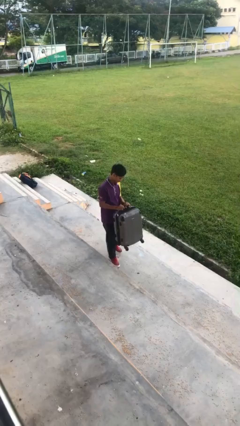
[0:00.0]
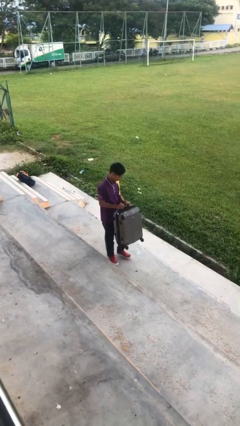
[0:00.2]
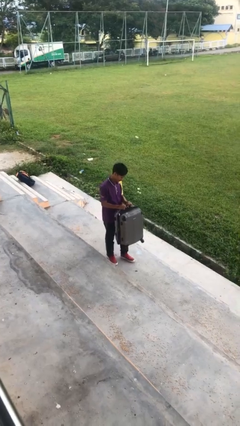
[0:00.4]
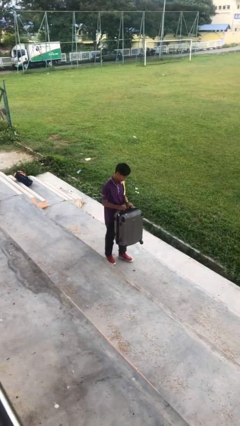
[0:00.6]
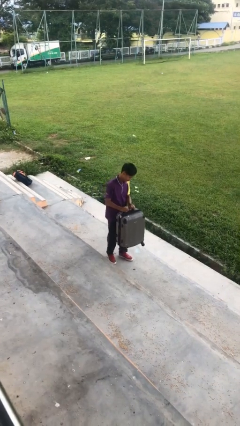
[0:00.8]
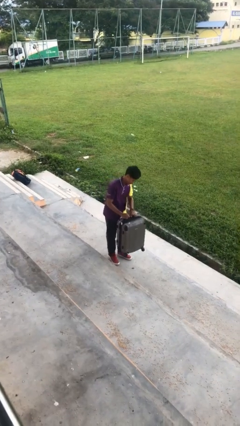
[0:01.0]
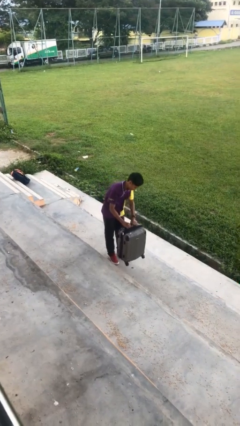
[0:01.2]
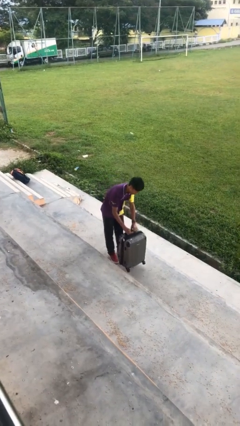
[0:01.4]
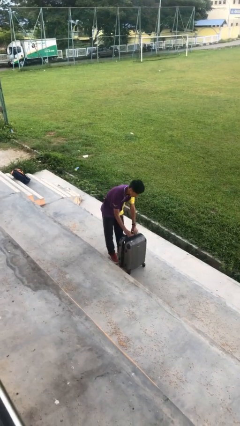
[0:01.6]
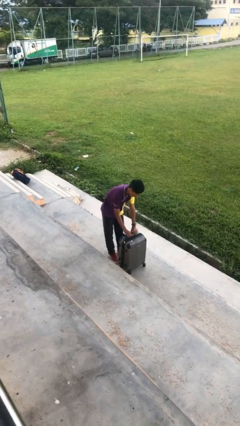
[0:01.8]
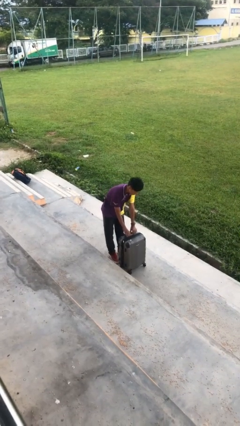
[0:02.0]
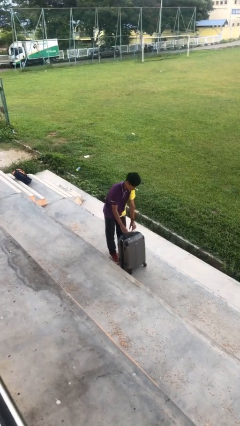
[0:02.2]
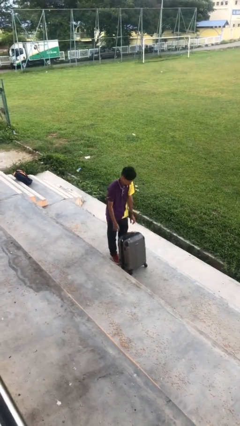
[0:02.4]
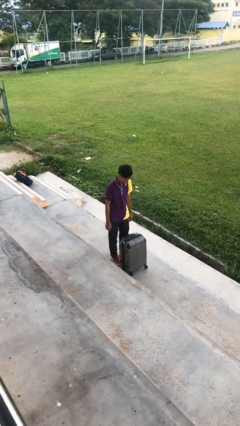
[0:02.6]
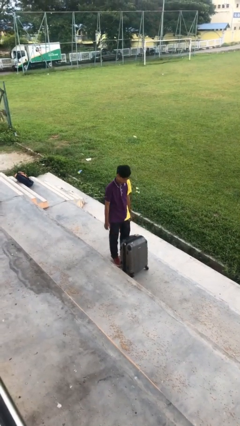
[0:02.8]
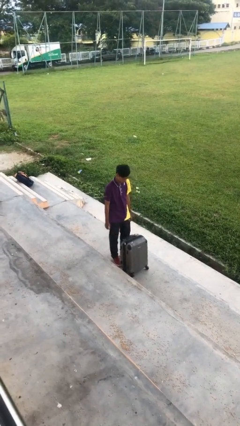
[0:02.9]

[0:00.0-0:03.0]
person puts down object on floor

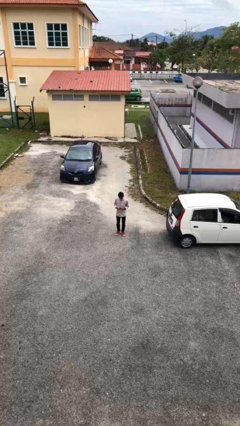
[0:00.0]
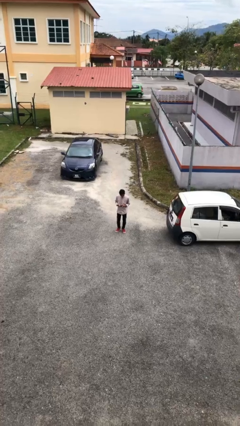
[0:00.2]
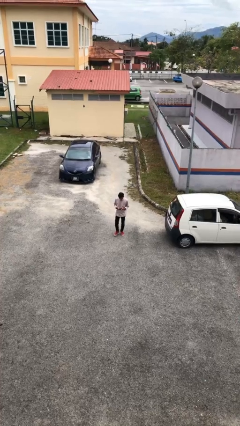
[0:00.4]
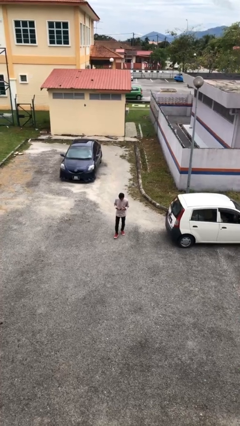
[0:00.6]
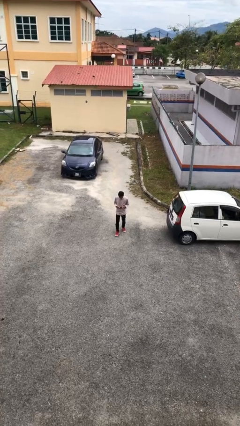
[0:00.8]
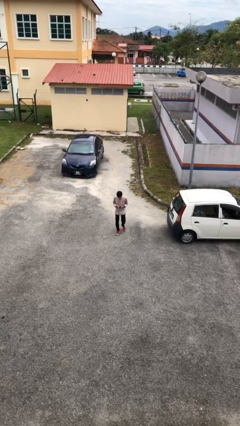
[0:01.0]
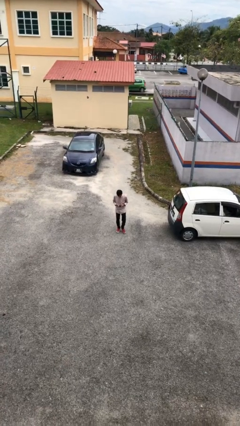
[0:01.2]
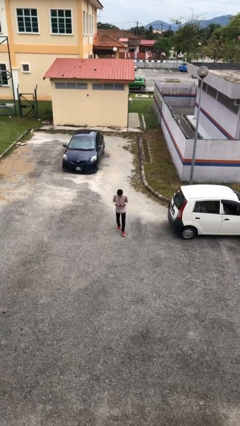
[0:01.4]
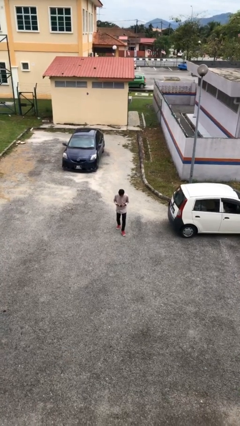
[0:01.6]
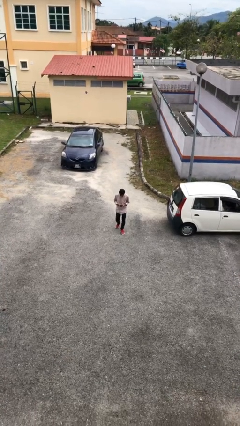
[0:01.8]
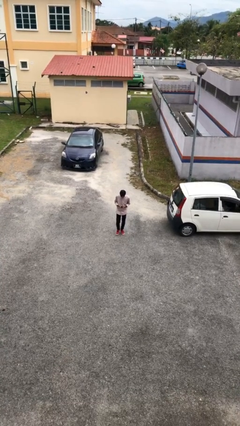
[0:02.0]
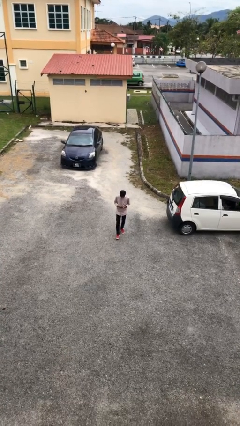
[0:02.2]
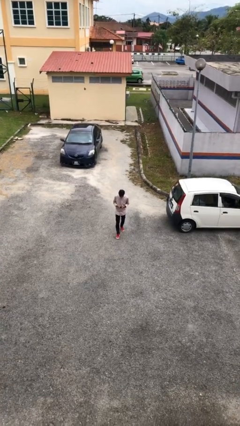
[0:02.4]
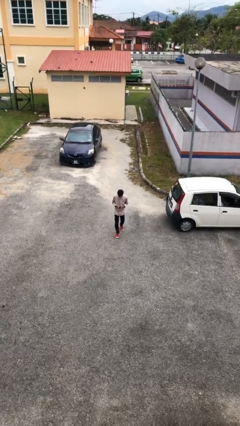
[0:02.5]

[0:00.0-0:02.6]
person texts on phone

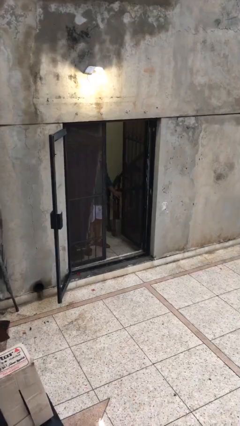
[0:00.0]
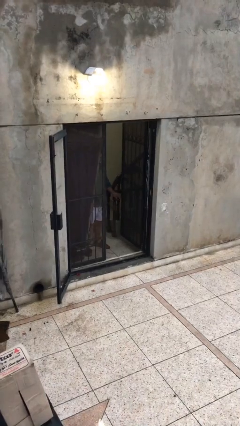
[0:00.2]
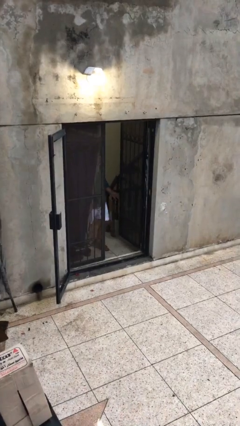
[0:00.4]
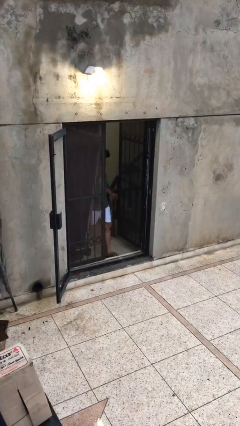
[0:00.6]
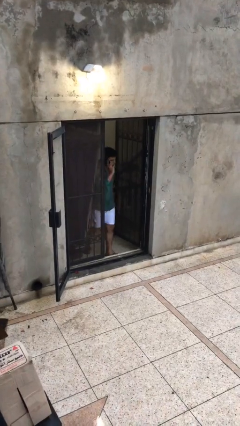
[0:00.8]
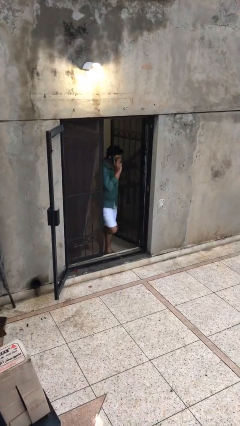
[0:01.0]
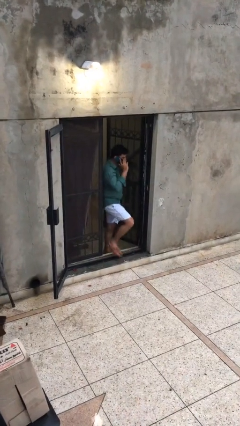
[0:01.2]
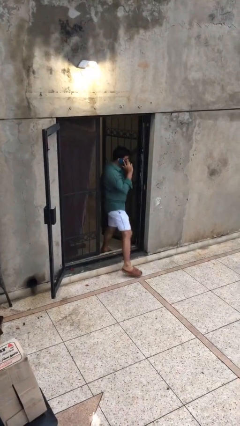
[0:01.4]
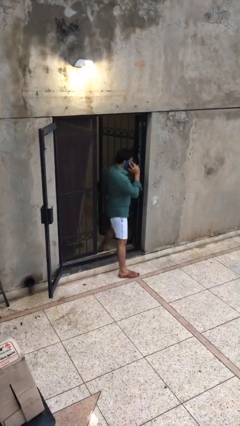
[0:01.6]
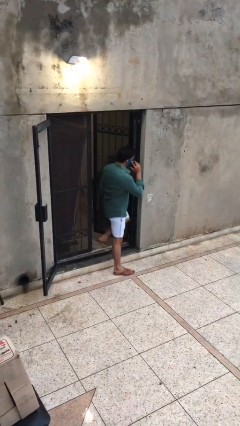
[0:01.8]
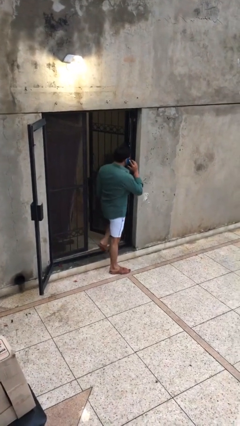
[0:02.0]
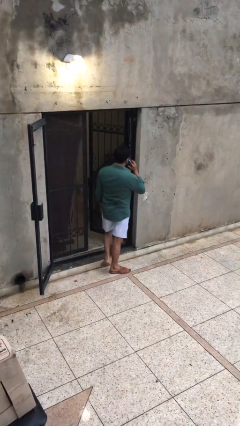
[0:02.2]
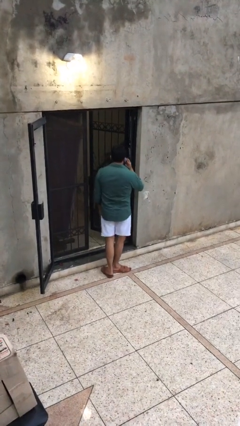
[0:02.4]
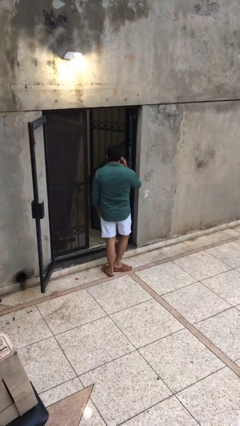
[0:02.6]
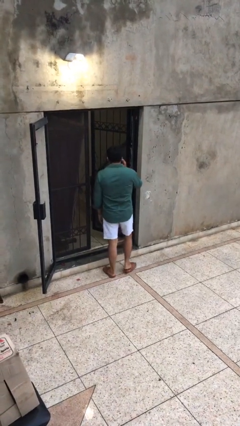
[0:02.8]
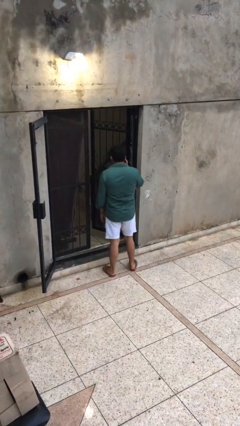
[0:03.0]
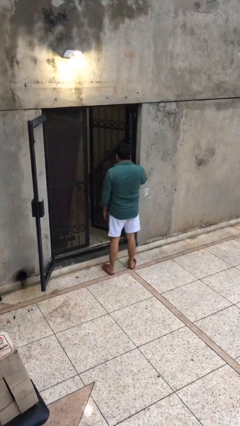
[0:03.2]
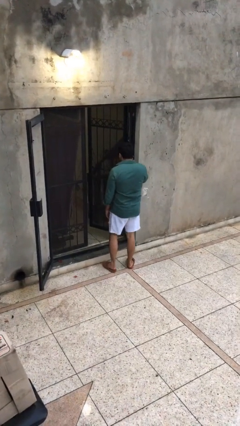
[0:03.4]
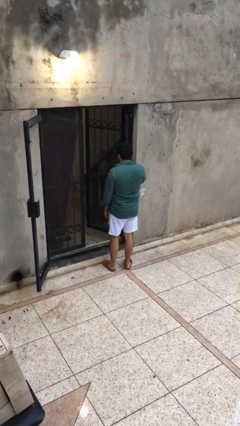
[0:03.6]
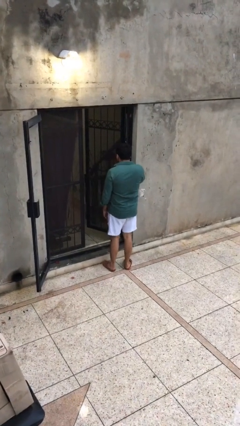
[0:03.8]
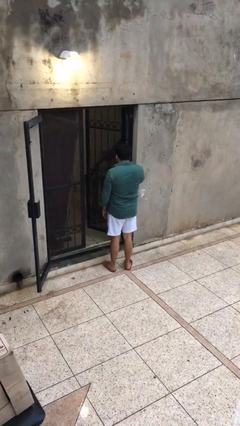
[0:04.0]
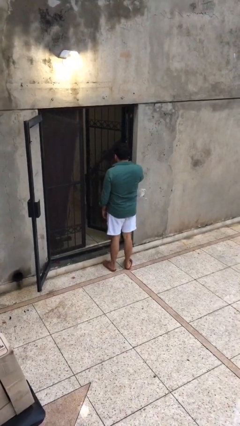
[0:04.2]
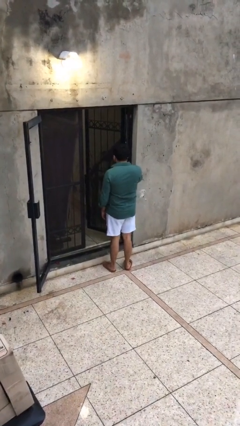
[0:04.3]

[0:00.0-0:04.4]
person enters scene through structure

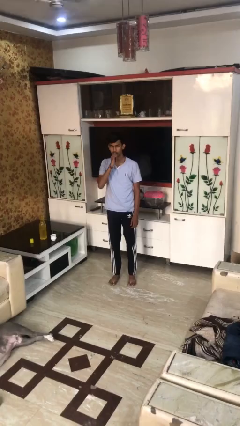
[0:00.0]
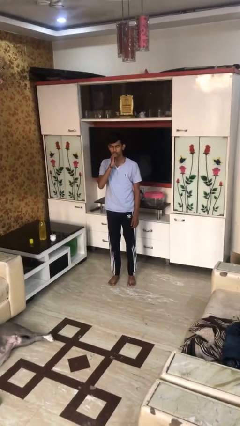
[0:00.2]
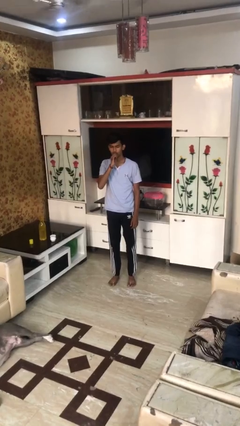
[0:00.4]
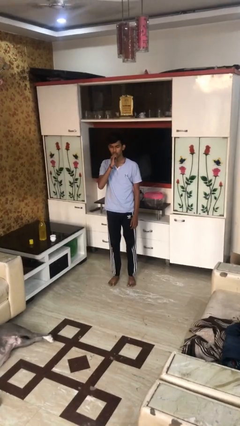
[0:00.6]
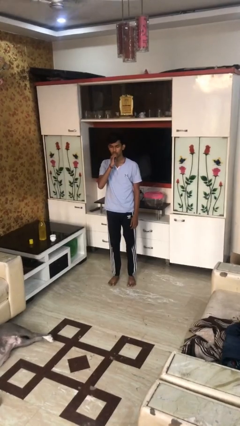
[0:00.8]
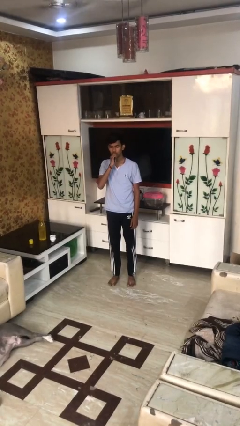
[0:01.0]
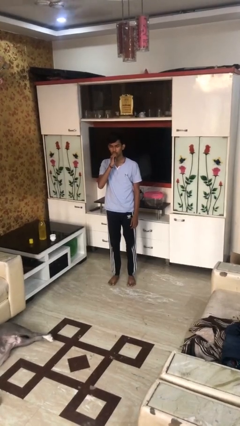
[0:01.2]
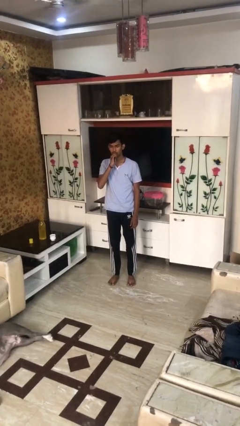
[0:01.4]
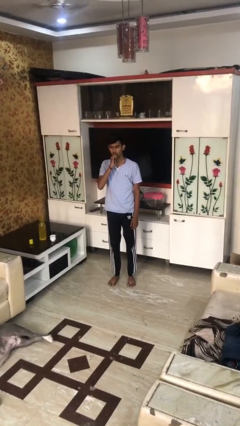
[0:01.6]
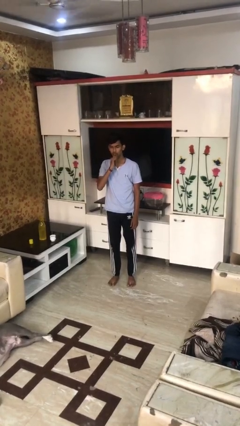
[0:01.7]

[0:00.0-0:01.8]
person vapes

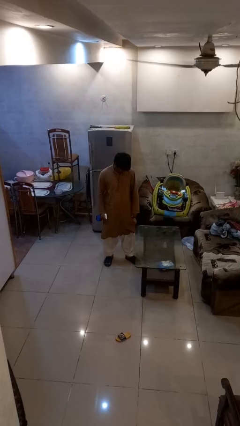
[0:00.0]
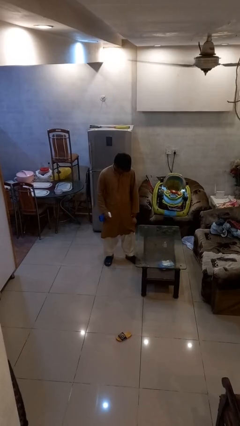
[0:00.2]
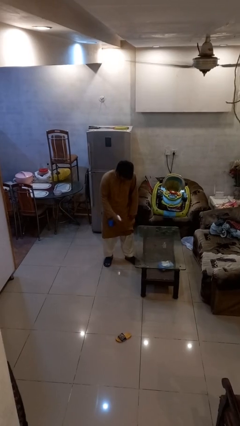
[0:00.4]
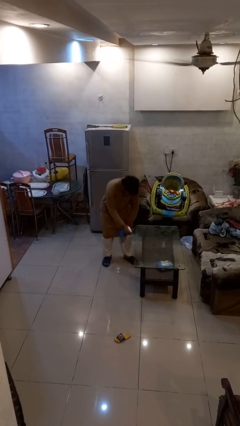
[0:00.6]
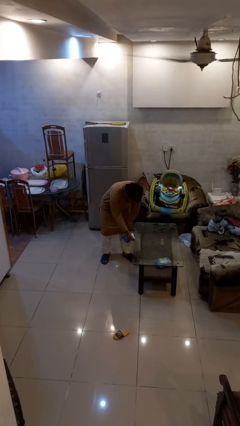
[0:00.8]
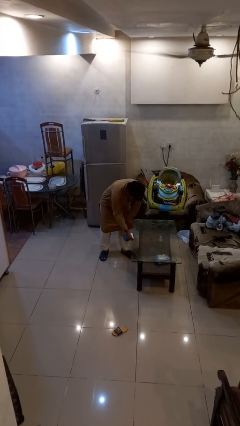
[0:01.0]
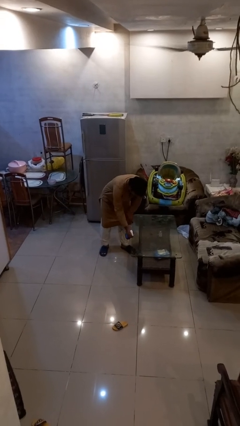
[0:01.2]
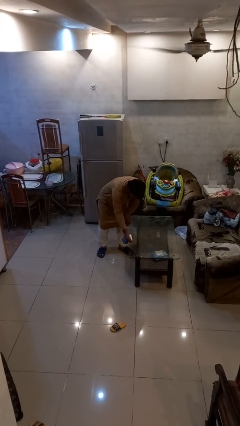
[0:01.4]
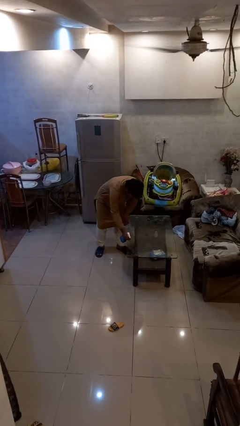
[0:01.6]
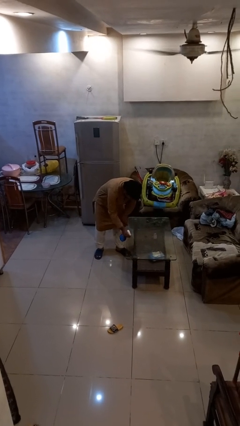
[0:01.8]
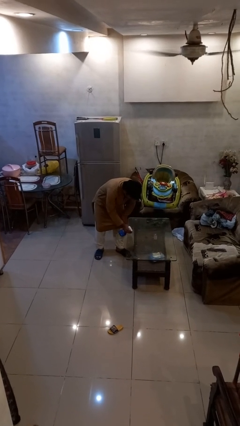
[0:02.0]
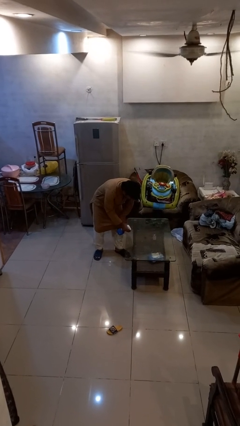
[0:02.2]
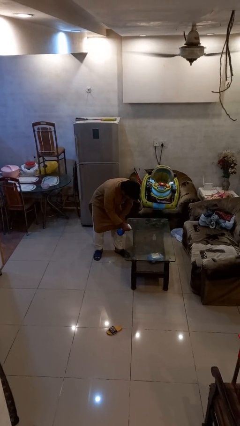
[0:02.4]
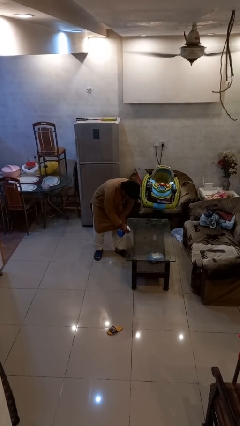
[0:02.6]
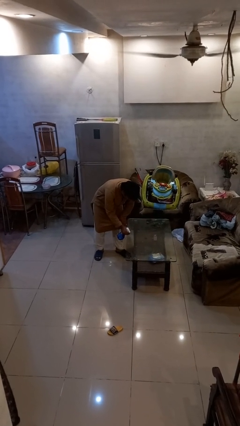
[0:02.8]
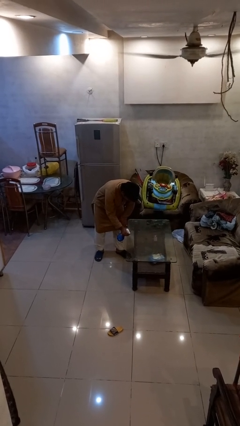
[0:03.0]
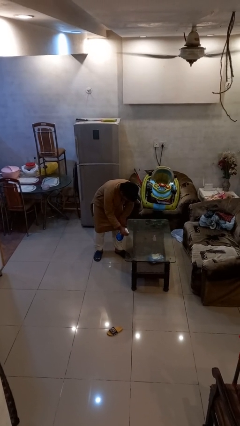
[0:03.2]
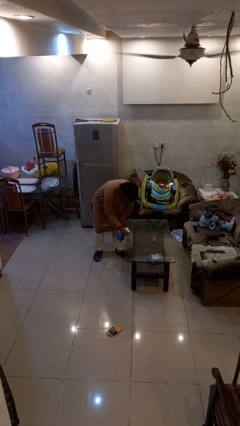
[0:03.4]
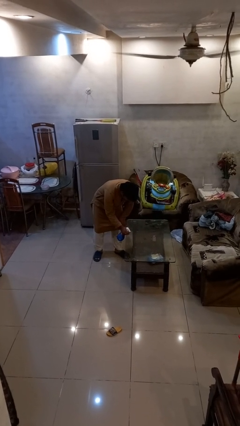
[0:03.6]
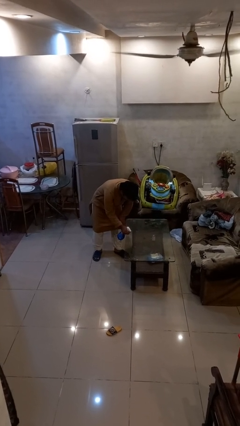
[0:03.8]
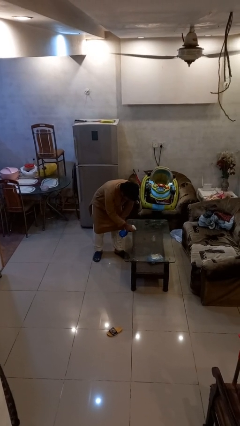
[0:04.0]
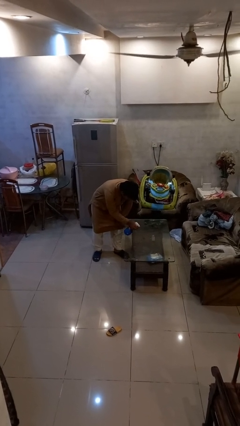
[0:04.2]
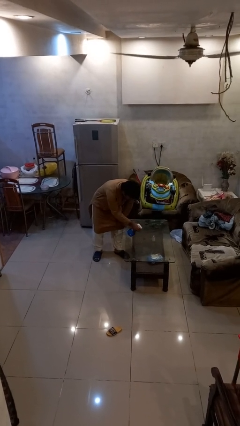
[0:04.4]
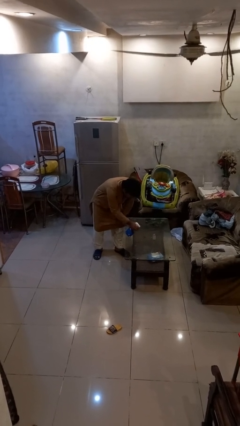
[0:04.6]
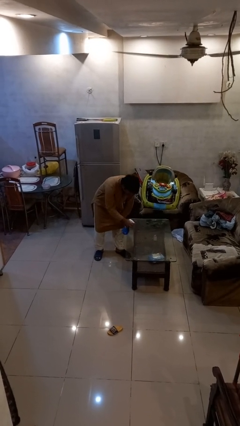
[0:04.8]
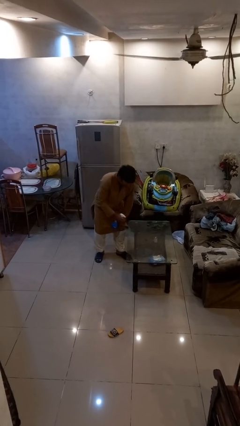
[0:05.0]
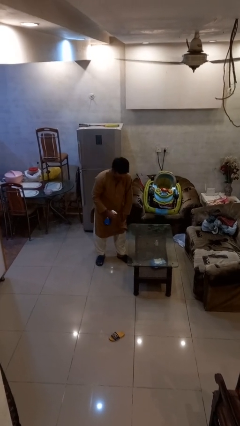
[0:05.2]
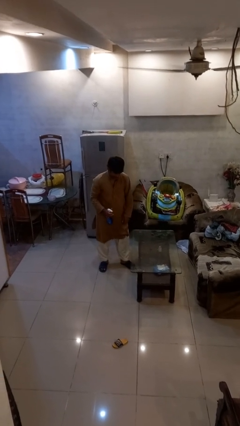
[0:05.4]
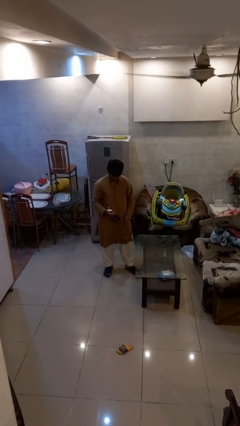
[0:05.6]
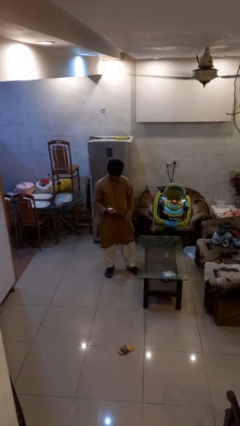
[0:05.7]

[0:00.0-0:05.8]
person sprays from bottle
